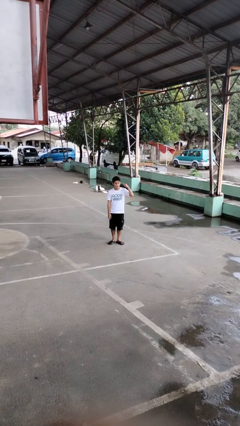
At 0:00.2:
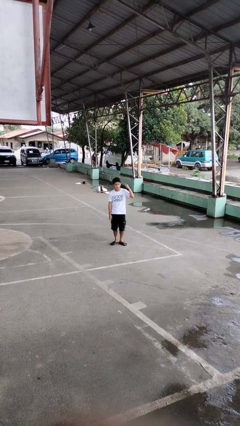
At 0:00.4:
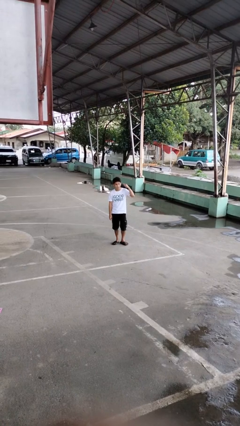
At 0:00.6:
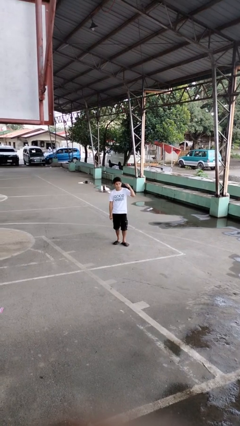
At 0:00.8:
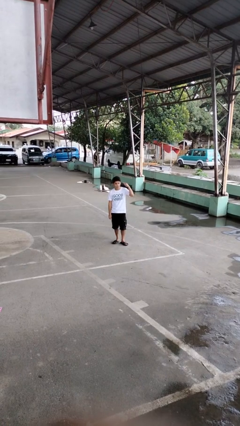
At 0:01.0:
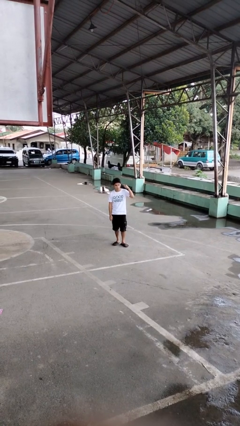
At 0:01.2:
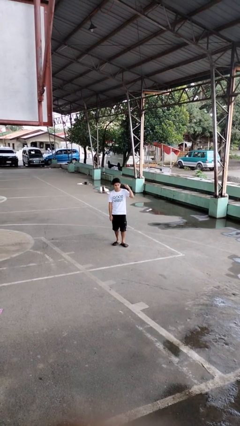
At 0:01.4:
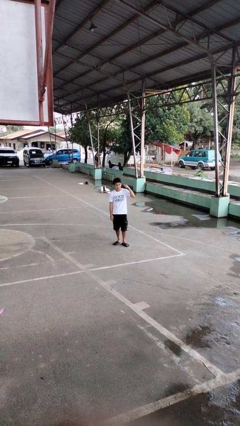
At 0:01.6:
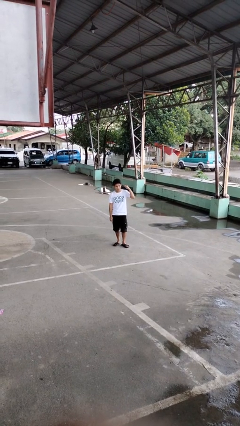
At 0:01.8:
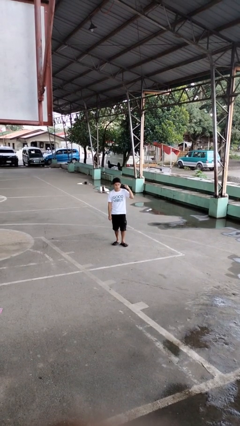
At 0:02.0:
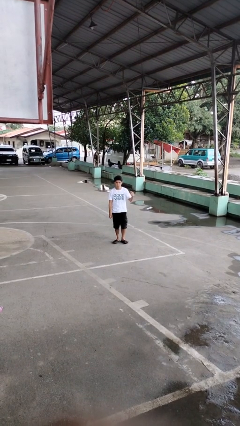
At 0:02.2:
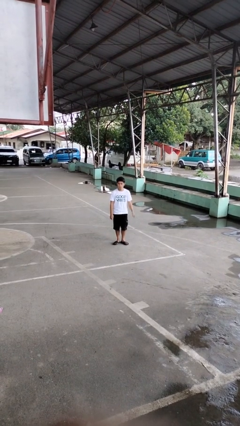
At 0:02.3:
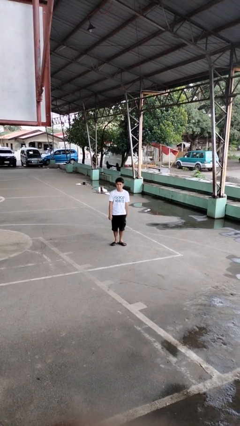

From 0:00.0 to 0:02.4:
person gestures listen closely

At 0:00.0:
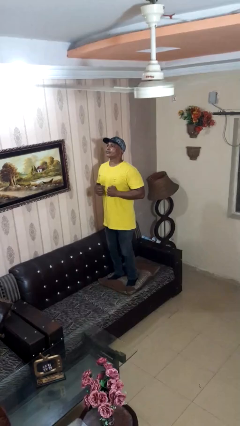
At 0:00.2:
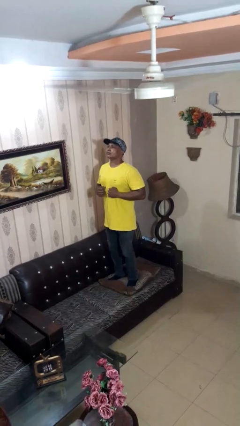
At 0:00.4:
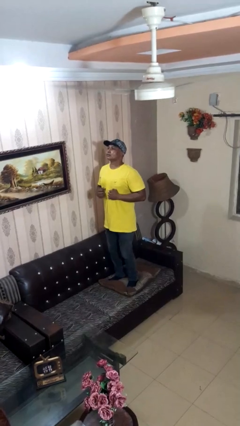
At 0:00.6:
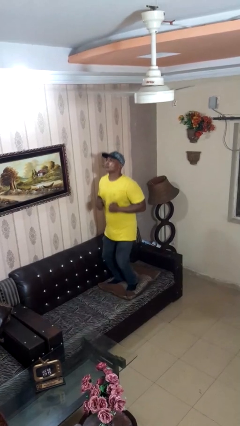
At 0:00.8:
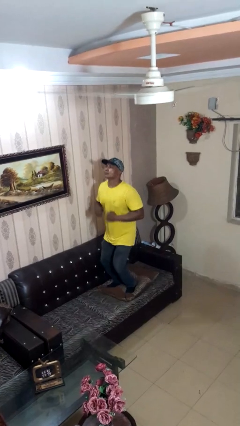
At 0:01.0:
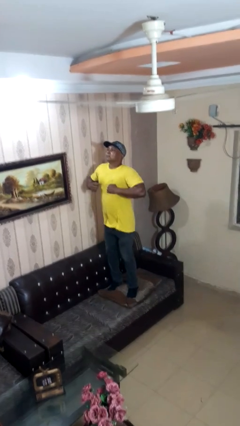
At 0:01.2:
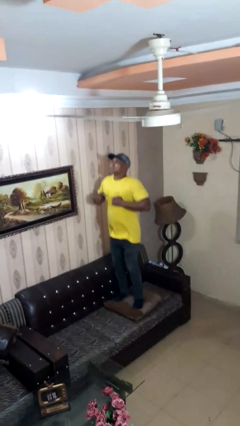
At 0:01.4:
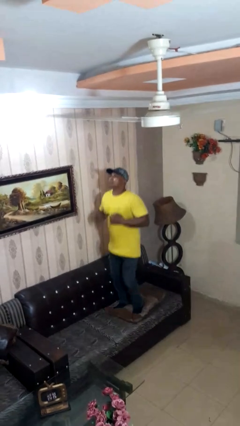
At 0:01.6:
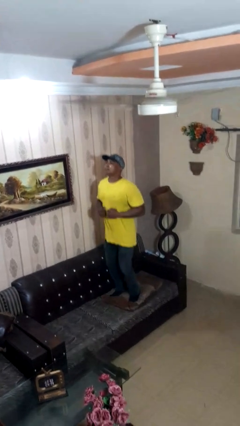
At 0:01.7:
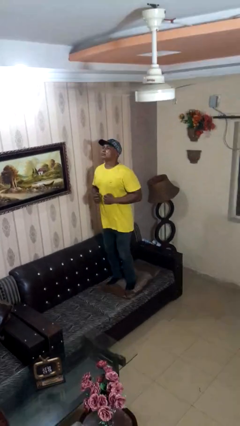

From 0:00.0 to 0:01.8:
person jumps on couch

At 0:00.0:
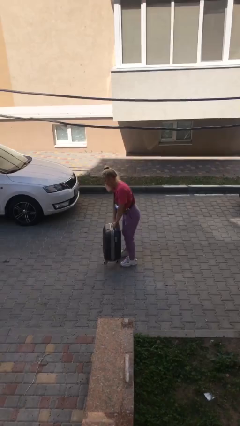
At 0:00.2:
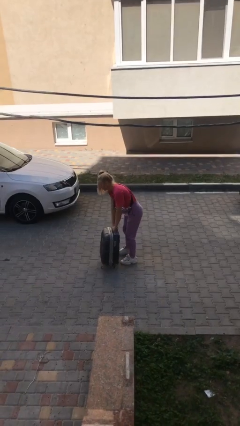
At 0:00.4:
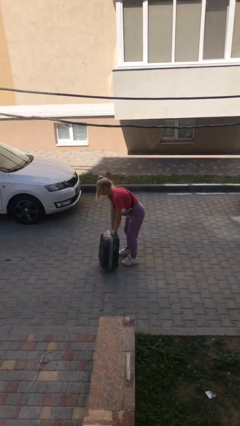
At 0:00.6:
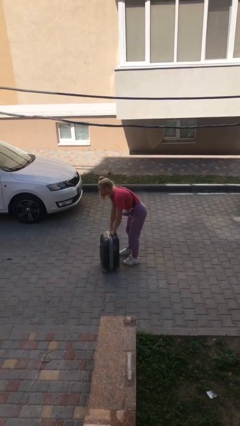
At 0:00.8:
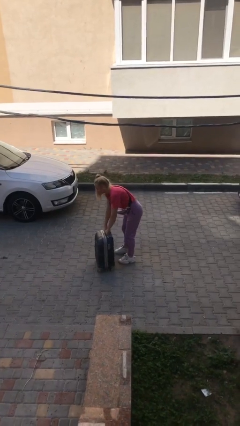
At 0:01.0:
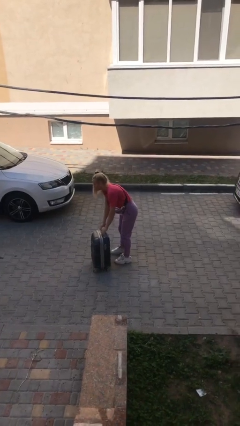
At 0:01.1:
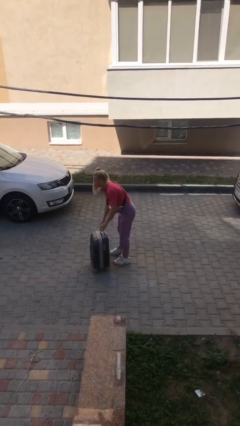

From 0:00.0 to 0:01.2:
person puts down object on floor

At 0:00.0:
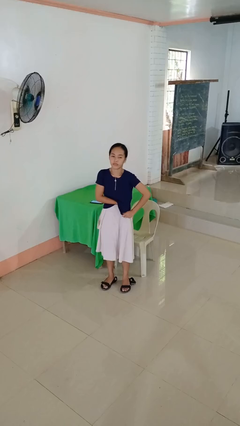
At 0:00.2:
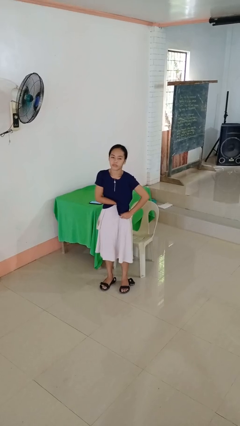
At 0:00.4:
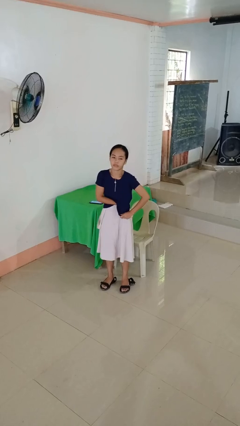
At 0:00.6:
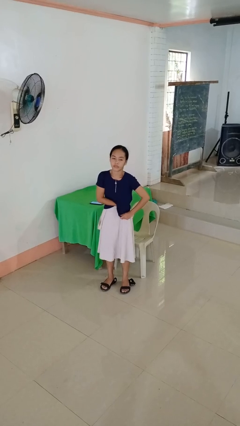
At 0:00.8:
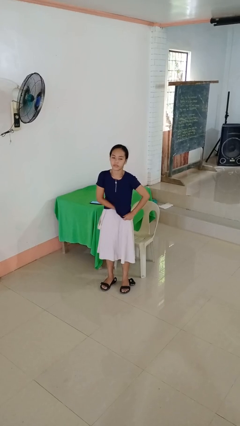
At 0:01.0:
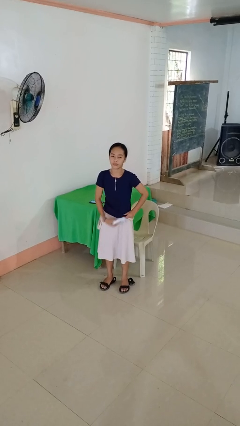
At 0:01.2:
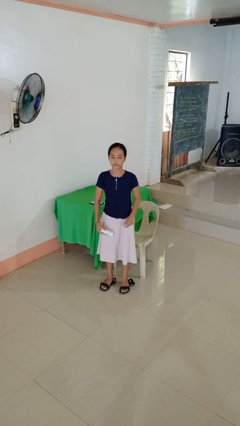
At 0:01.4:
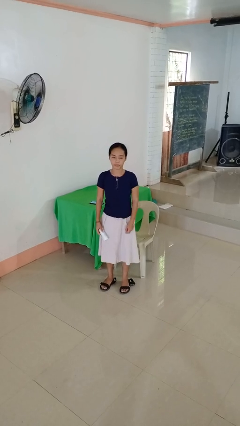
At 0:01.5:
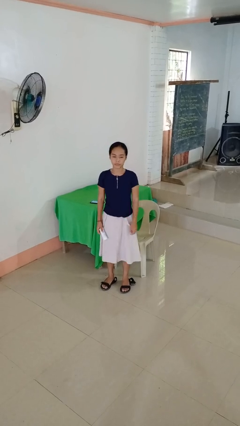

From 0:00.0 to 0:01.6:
person applies deodorant

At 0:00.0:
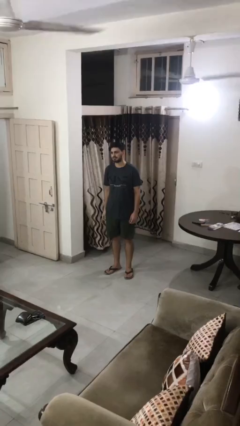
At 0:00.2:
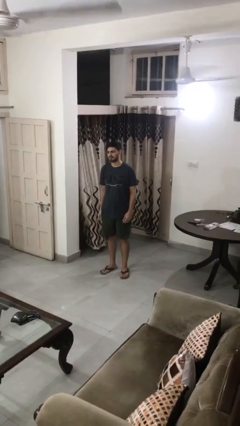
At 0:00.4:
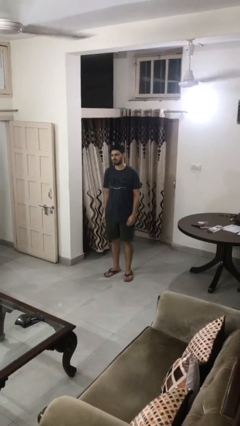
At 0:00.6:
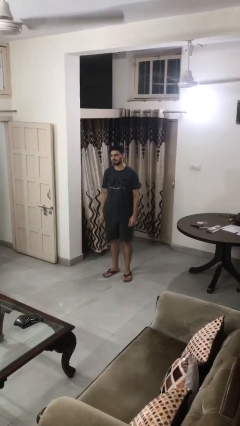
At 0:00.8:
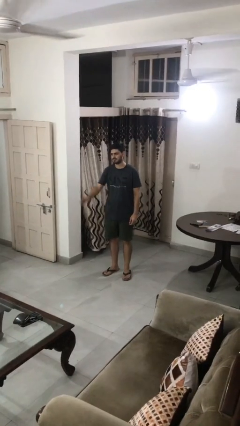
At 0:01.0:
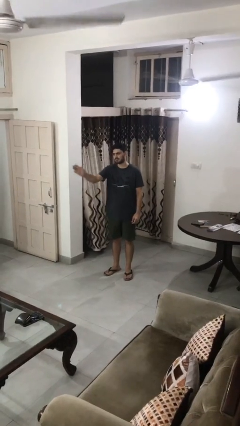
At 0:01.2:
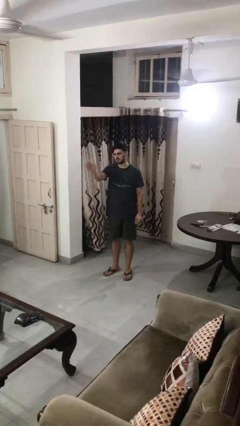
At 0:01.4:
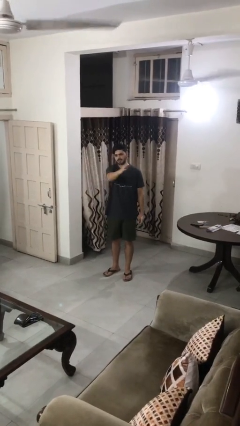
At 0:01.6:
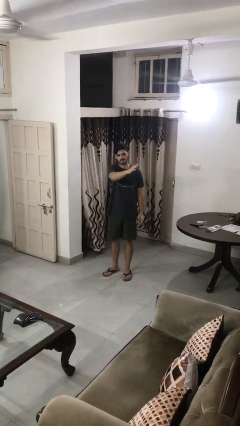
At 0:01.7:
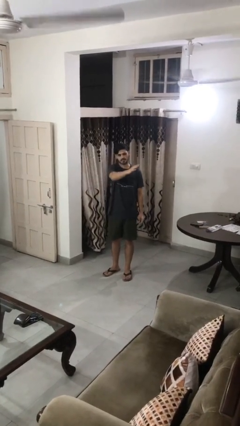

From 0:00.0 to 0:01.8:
person gestures swipe left

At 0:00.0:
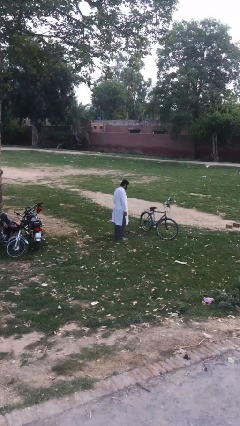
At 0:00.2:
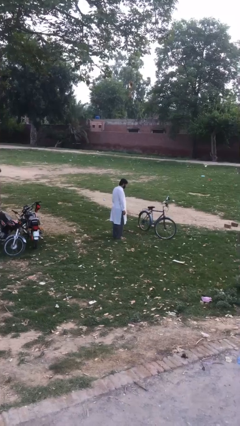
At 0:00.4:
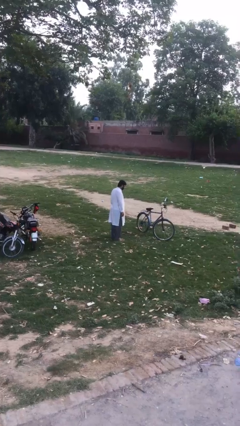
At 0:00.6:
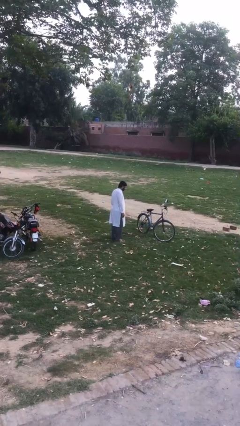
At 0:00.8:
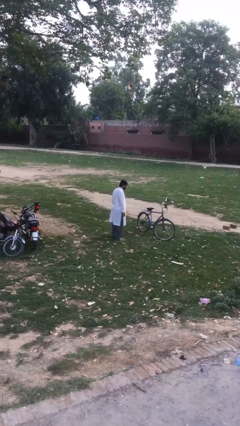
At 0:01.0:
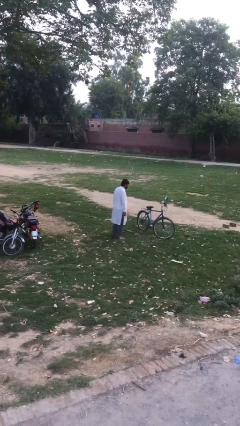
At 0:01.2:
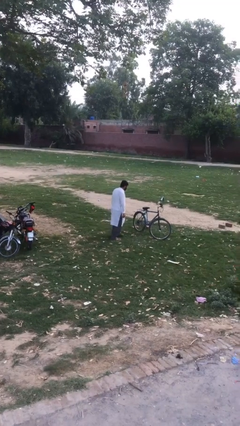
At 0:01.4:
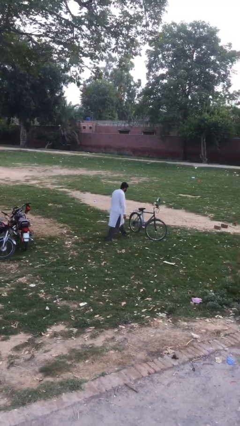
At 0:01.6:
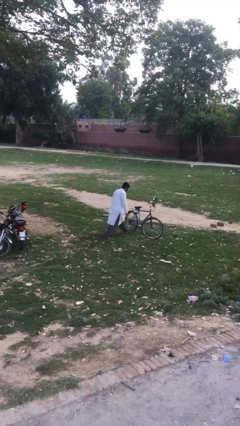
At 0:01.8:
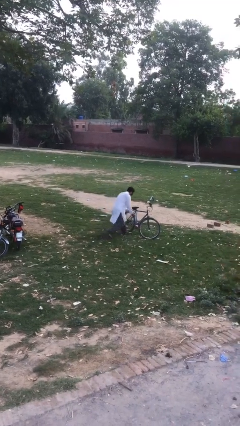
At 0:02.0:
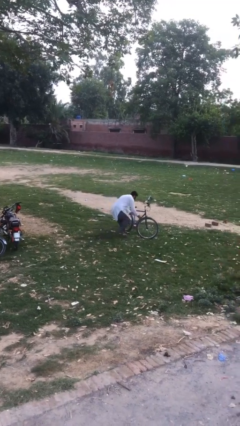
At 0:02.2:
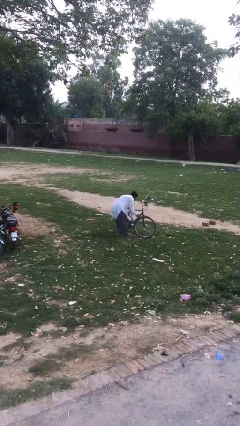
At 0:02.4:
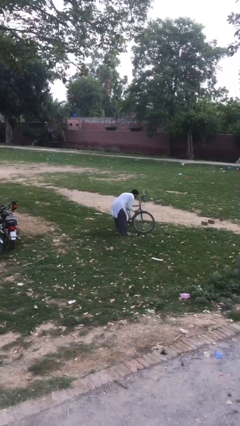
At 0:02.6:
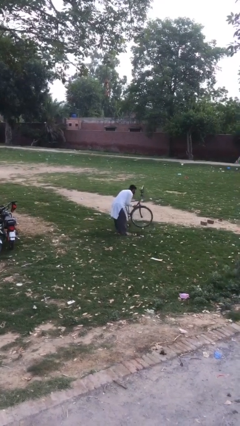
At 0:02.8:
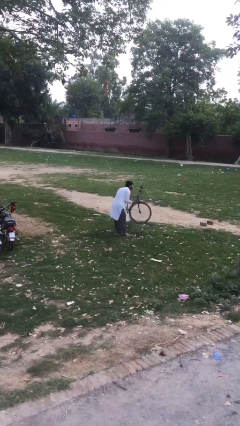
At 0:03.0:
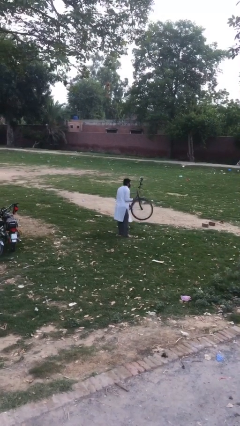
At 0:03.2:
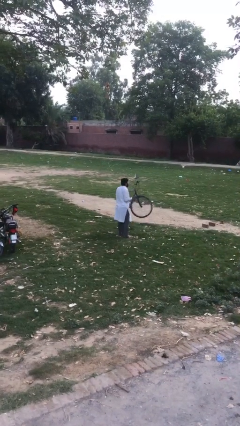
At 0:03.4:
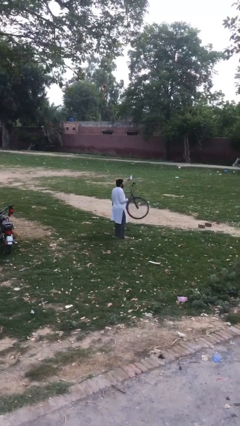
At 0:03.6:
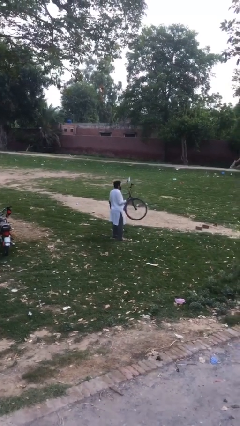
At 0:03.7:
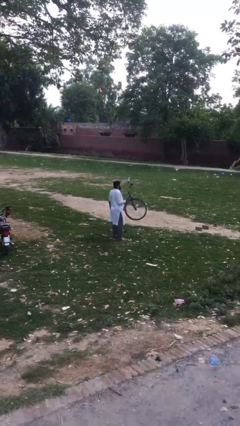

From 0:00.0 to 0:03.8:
person picks up object from floor

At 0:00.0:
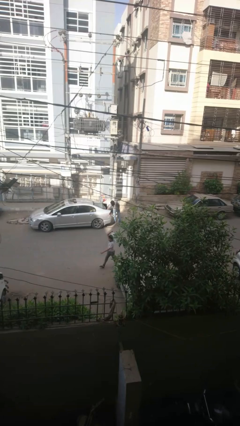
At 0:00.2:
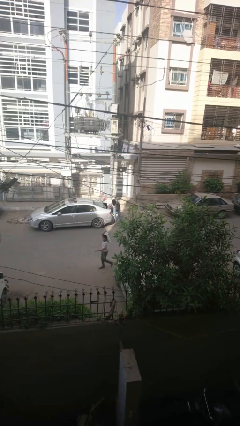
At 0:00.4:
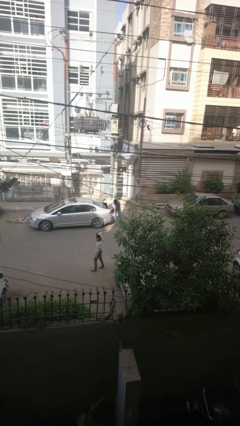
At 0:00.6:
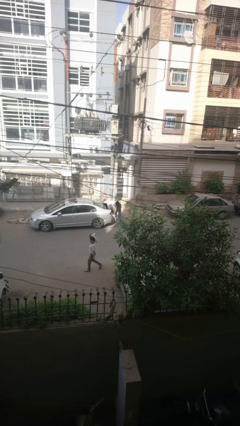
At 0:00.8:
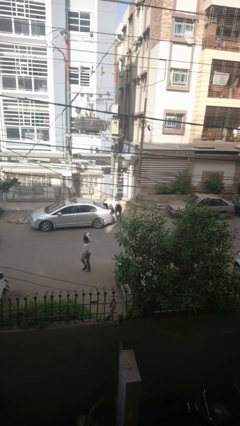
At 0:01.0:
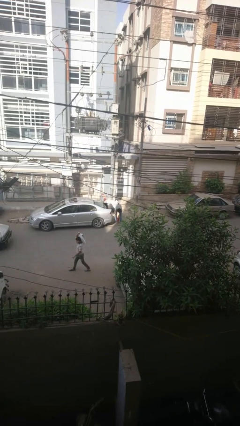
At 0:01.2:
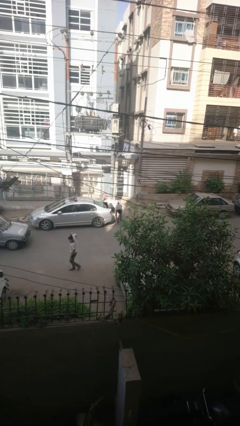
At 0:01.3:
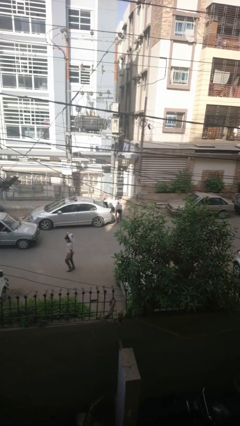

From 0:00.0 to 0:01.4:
person unloads car

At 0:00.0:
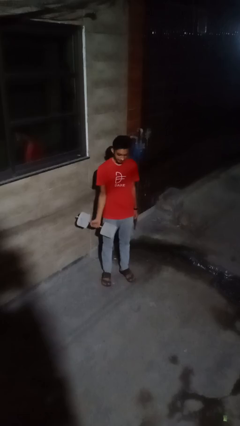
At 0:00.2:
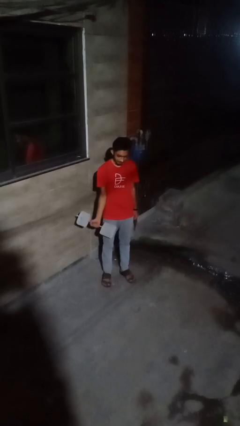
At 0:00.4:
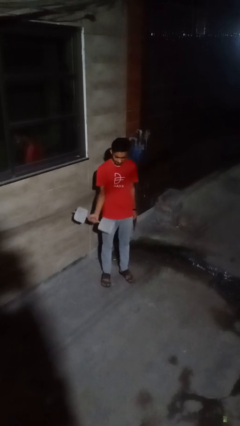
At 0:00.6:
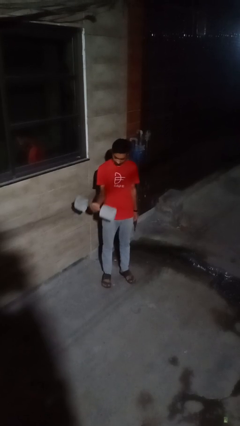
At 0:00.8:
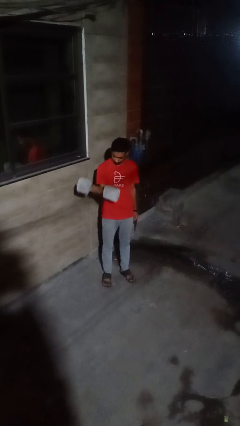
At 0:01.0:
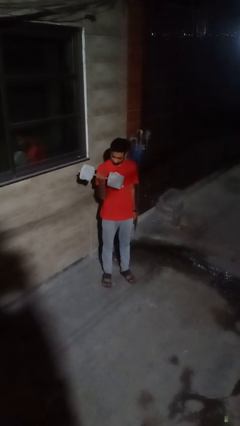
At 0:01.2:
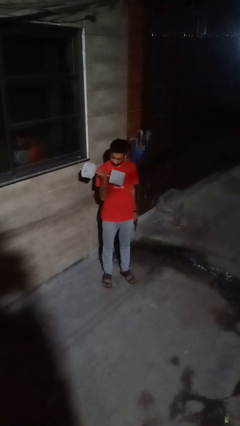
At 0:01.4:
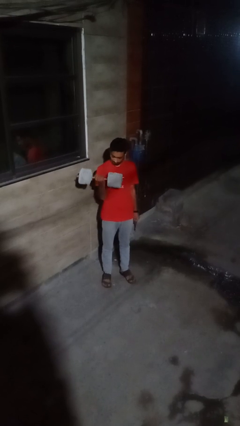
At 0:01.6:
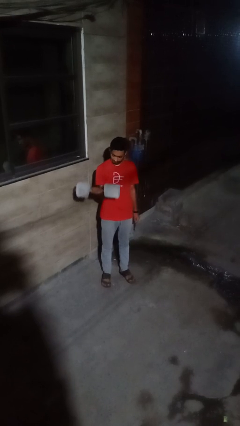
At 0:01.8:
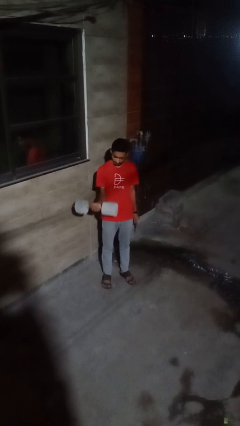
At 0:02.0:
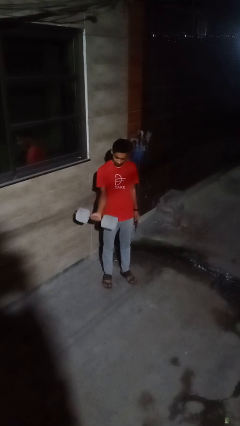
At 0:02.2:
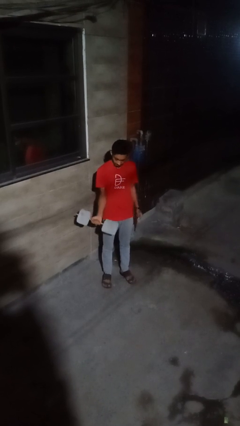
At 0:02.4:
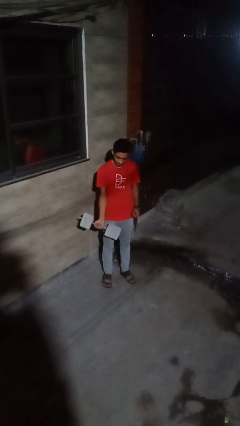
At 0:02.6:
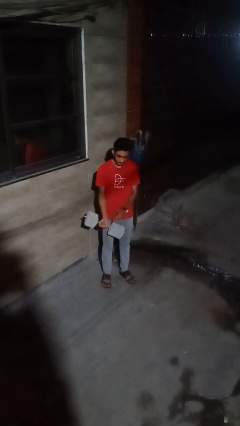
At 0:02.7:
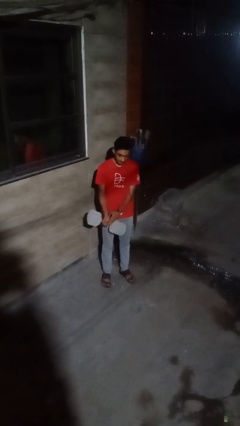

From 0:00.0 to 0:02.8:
person lifts dumbbells
